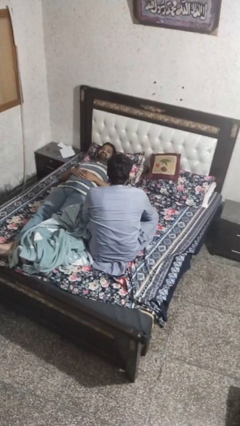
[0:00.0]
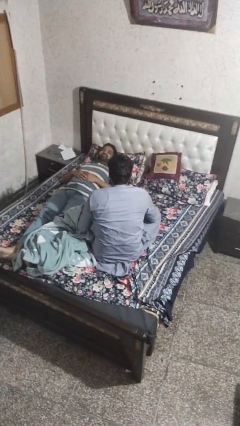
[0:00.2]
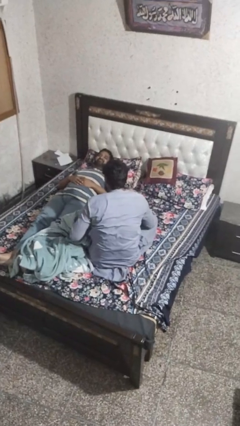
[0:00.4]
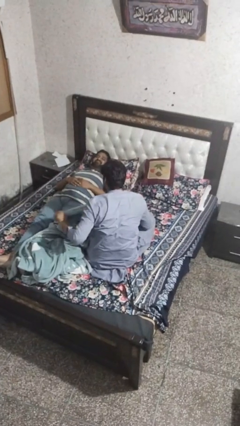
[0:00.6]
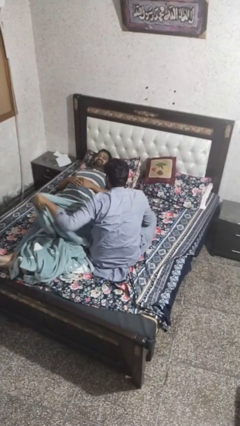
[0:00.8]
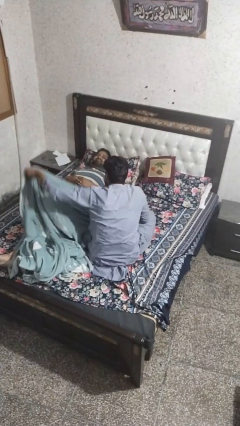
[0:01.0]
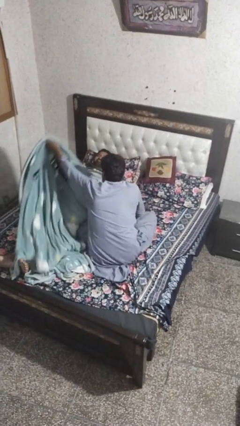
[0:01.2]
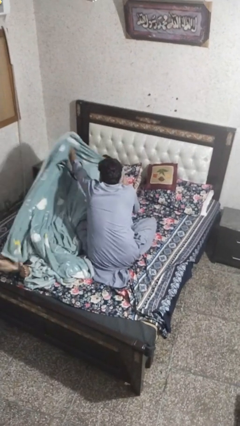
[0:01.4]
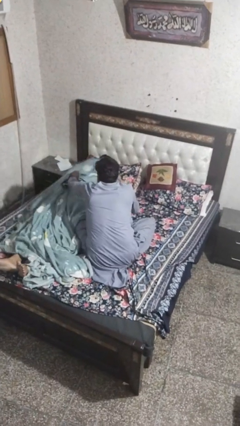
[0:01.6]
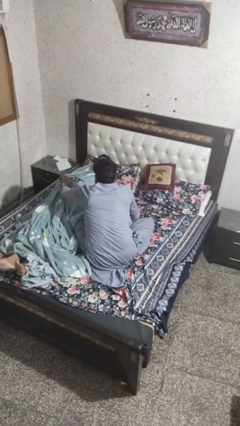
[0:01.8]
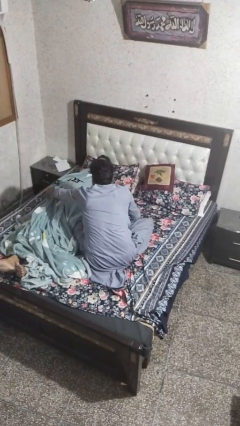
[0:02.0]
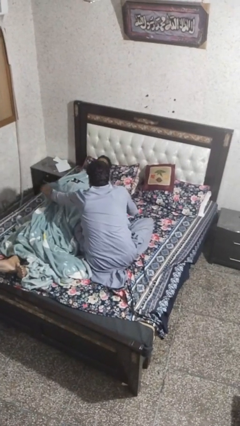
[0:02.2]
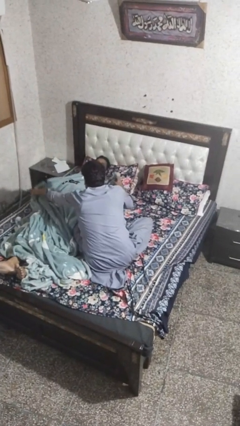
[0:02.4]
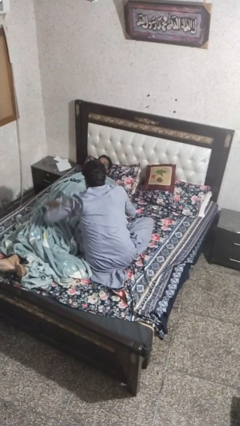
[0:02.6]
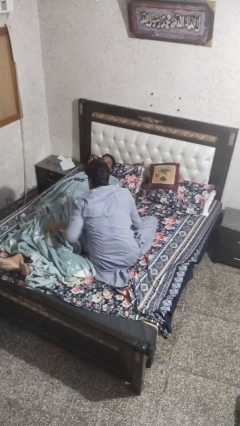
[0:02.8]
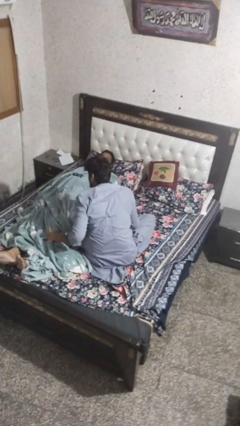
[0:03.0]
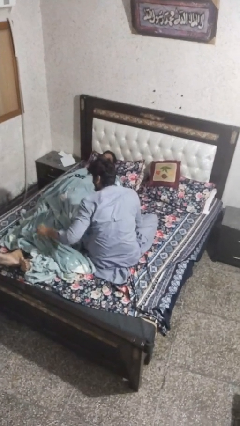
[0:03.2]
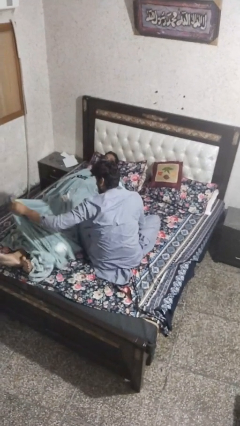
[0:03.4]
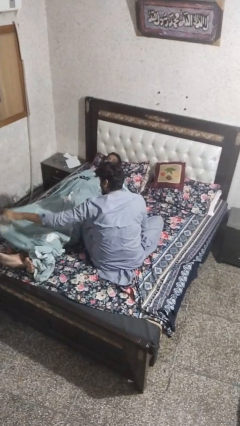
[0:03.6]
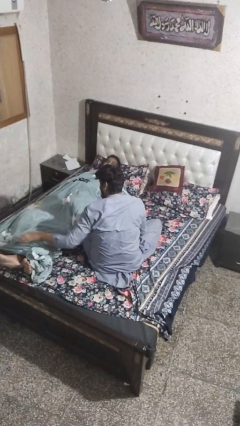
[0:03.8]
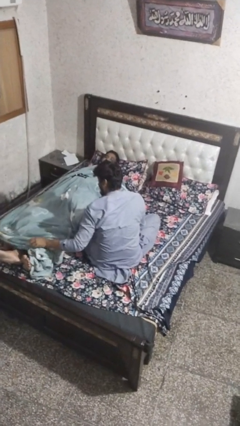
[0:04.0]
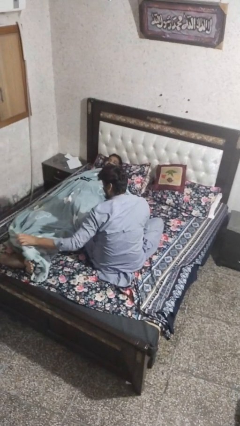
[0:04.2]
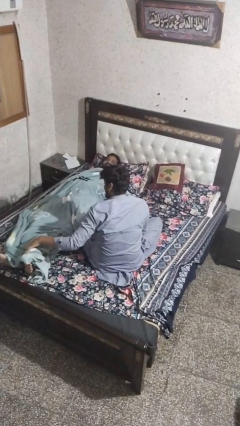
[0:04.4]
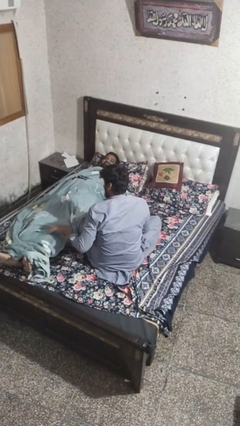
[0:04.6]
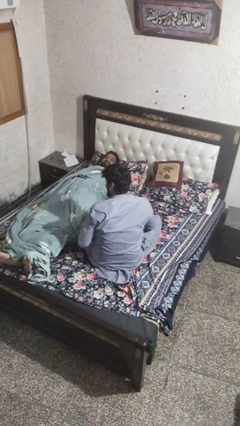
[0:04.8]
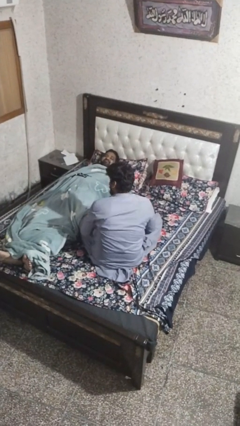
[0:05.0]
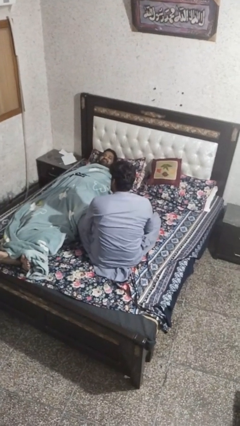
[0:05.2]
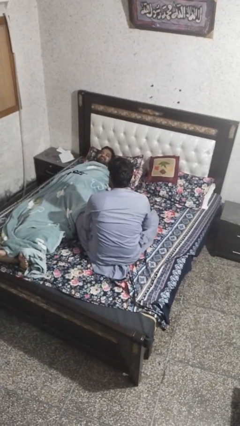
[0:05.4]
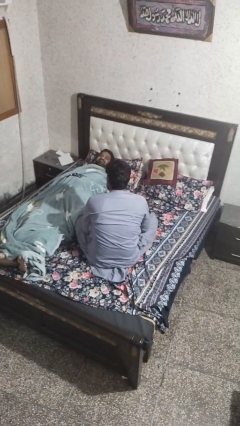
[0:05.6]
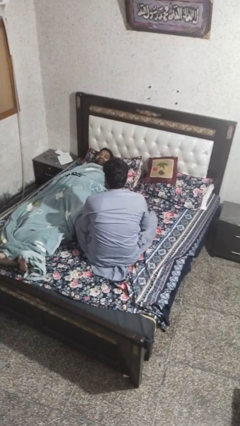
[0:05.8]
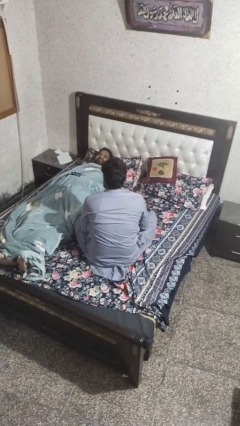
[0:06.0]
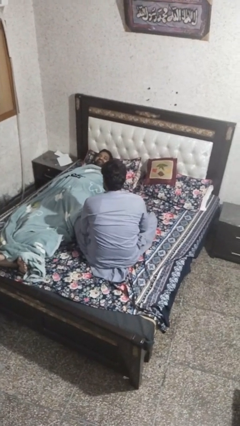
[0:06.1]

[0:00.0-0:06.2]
person covers friend with blanket

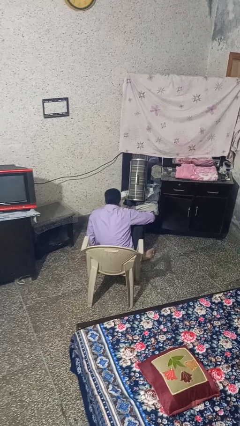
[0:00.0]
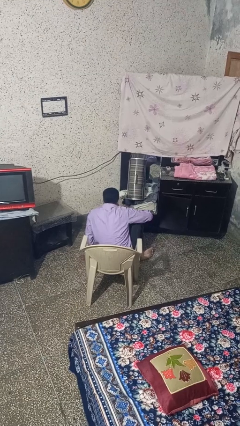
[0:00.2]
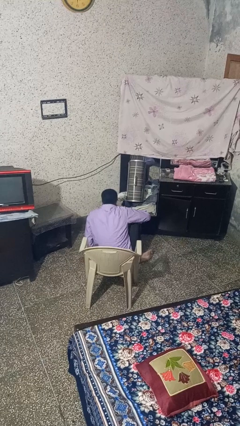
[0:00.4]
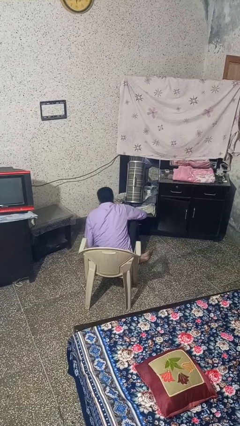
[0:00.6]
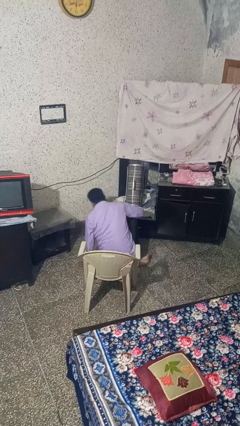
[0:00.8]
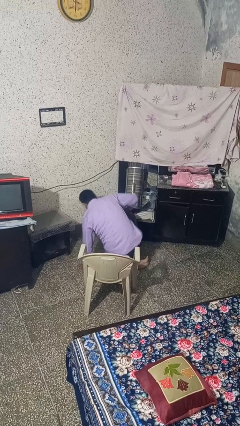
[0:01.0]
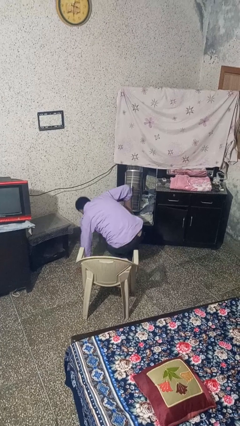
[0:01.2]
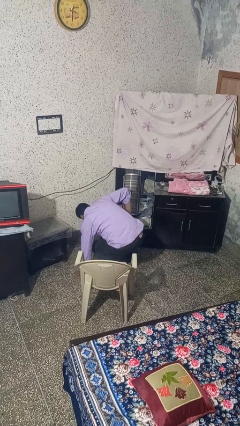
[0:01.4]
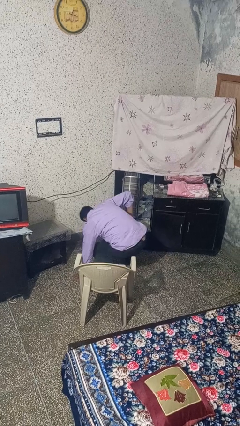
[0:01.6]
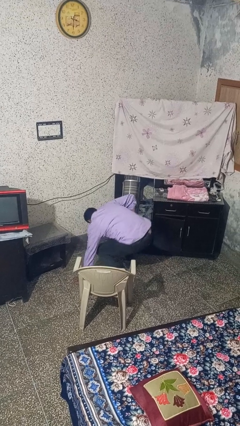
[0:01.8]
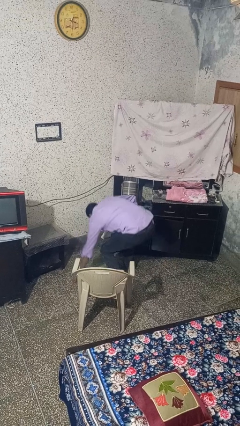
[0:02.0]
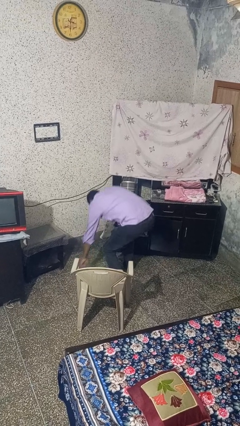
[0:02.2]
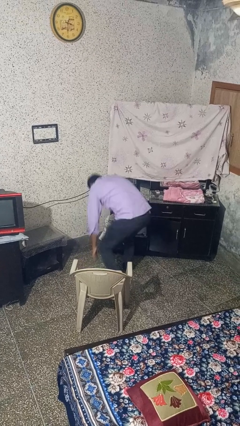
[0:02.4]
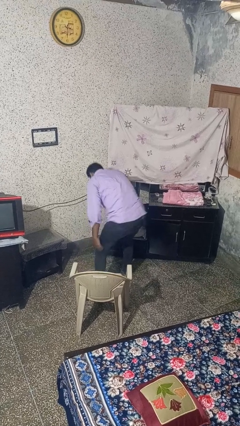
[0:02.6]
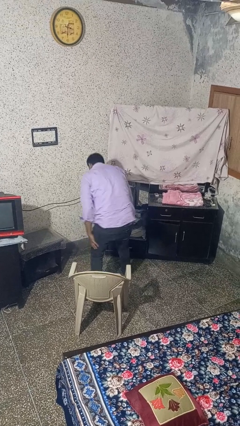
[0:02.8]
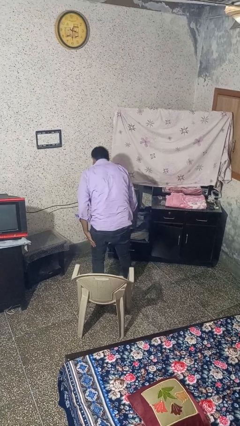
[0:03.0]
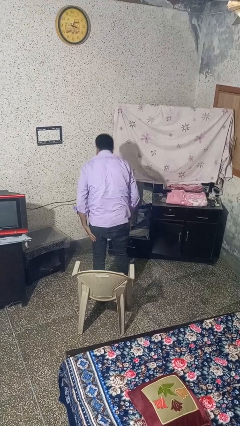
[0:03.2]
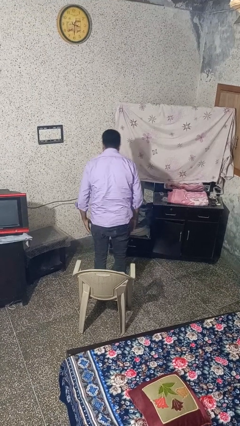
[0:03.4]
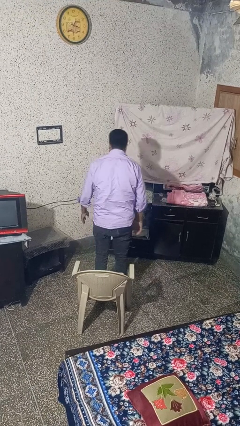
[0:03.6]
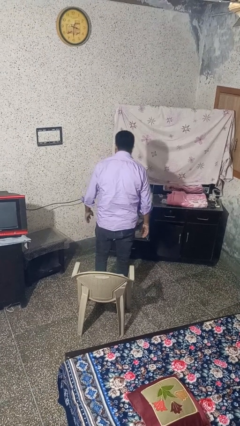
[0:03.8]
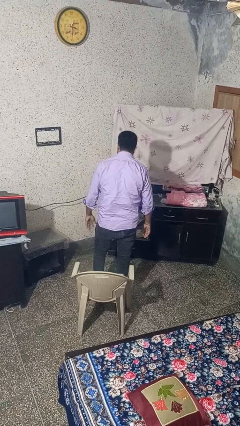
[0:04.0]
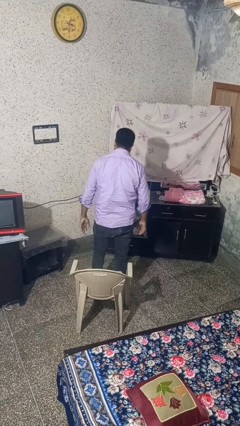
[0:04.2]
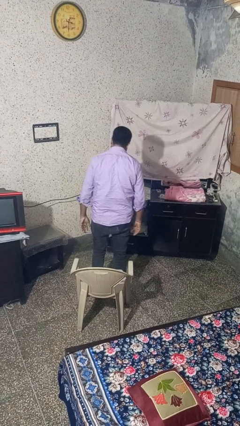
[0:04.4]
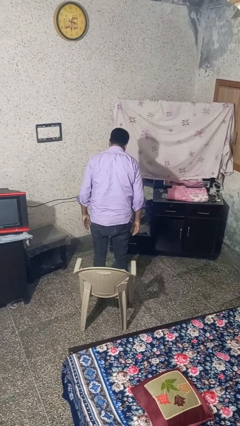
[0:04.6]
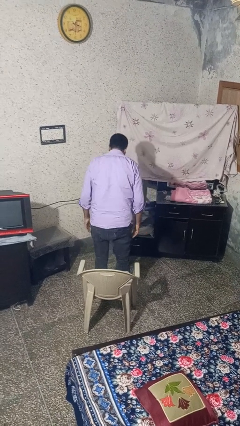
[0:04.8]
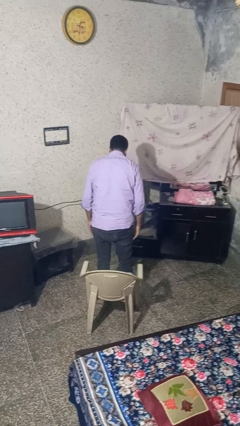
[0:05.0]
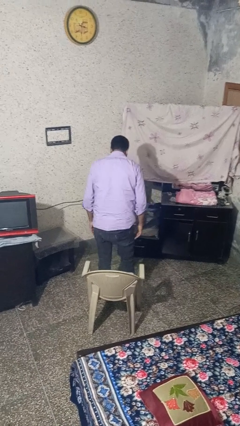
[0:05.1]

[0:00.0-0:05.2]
person stands up from floor

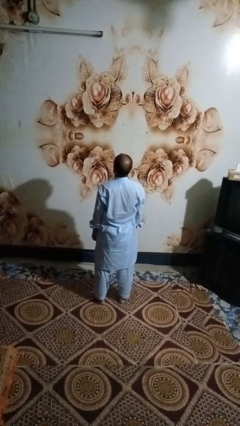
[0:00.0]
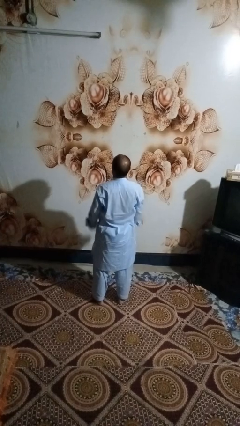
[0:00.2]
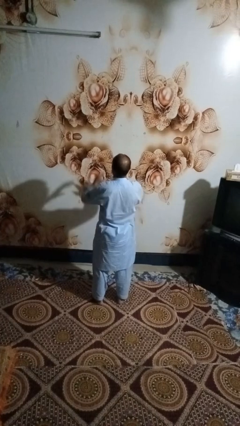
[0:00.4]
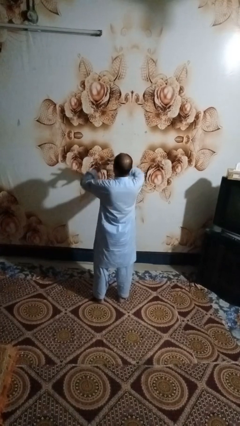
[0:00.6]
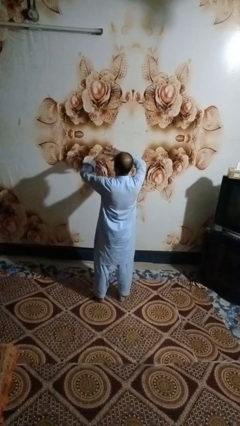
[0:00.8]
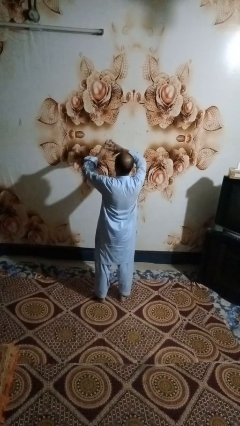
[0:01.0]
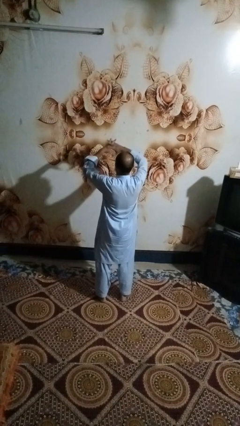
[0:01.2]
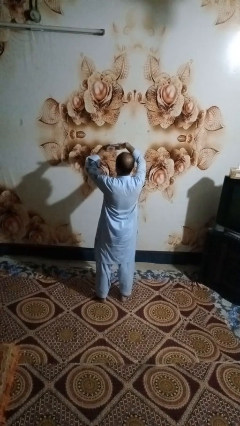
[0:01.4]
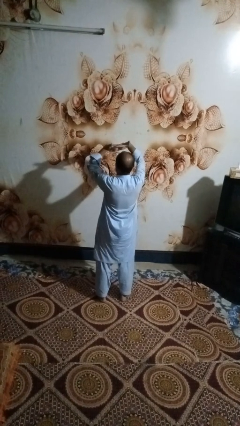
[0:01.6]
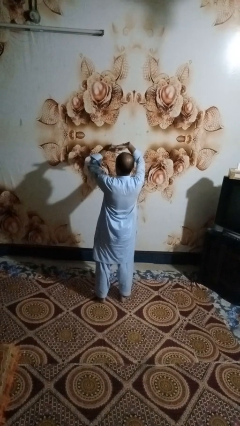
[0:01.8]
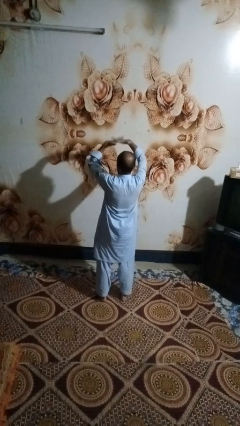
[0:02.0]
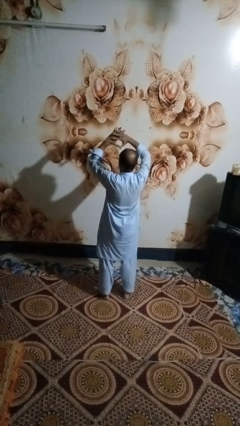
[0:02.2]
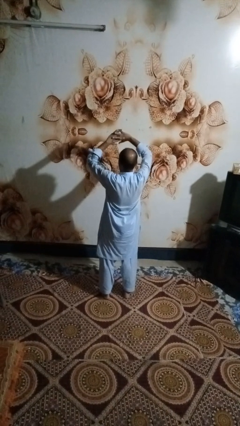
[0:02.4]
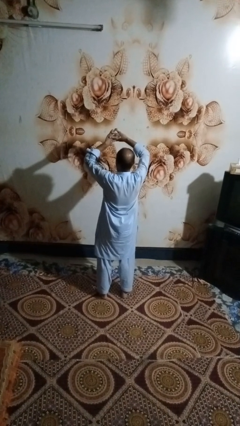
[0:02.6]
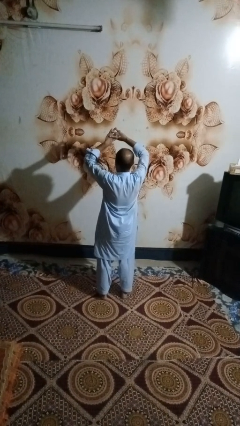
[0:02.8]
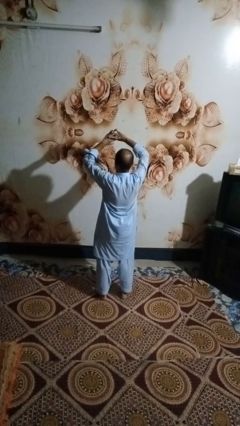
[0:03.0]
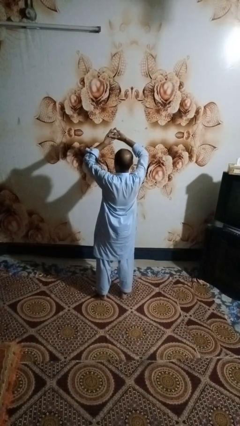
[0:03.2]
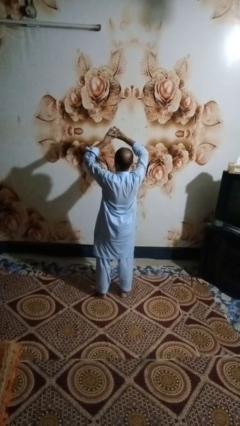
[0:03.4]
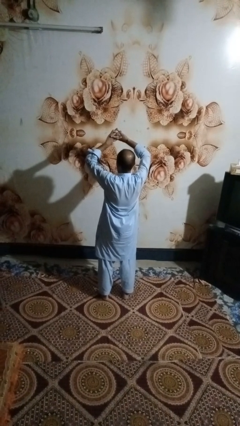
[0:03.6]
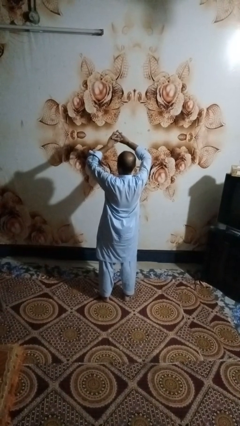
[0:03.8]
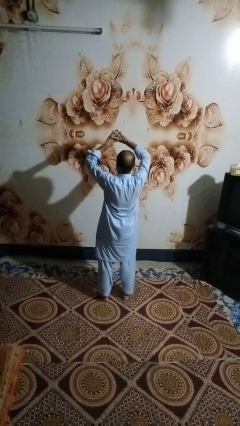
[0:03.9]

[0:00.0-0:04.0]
person cracks knuckles

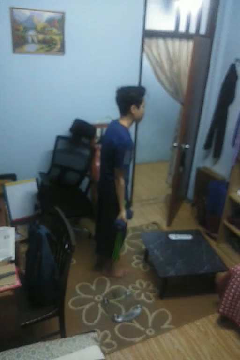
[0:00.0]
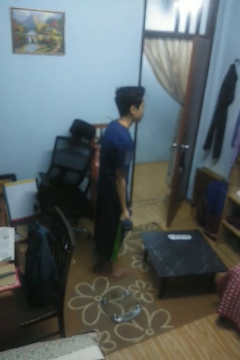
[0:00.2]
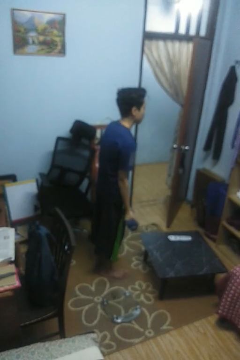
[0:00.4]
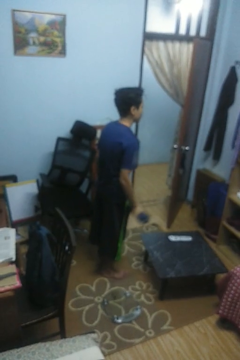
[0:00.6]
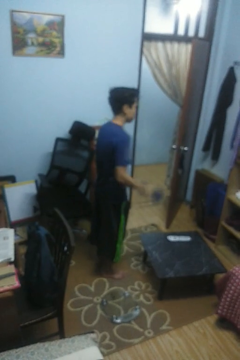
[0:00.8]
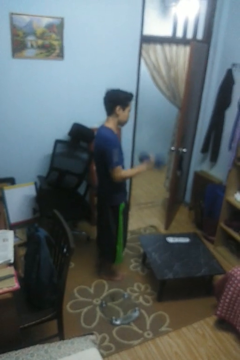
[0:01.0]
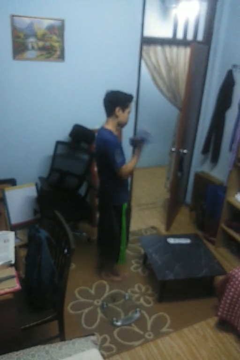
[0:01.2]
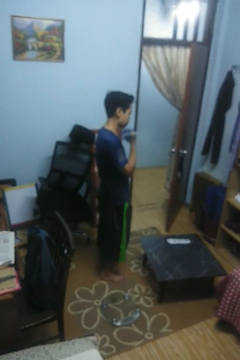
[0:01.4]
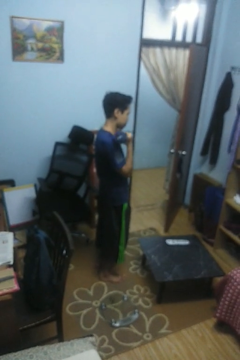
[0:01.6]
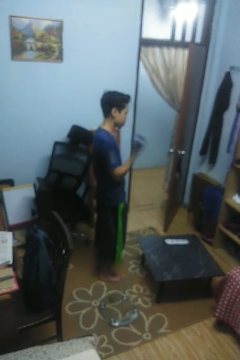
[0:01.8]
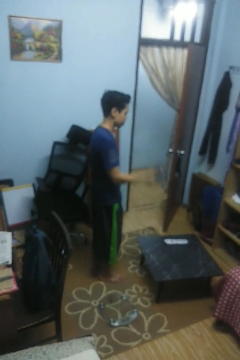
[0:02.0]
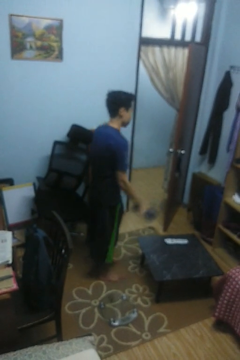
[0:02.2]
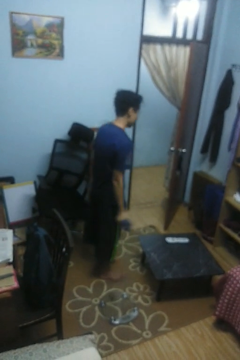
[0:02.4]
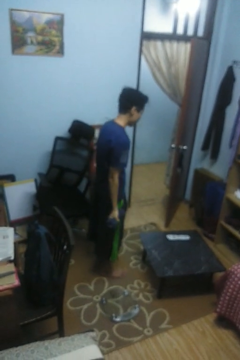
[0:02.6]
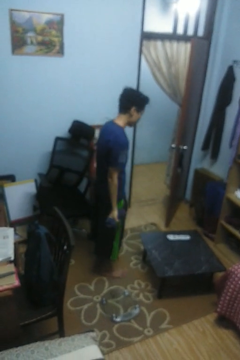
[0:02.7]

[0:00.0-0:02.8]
person lifts dumbbells
